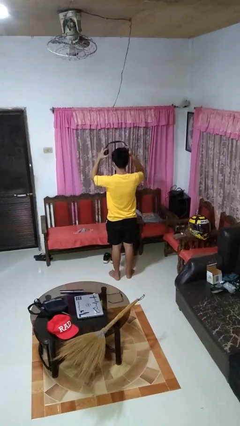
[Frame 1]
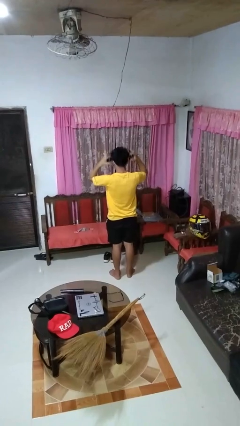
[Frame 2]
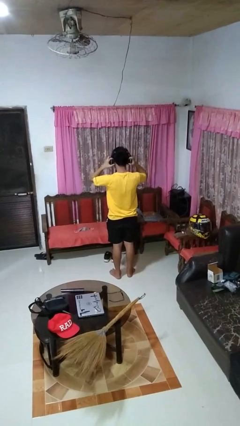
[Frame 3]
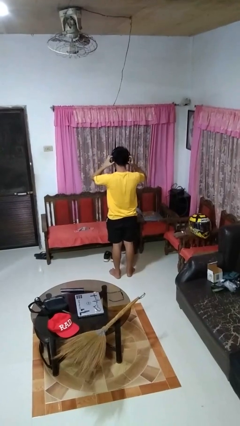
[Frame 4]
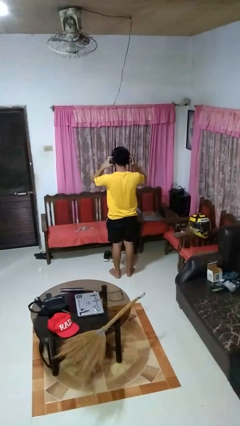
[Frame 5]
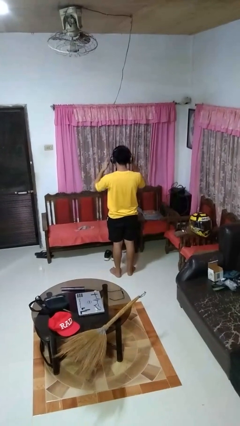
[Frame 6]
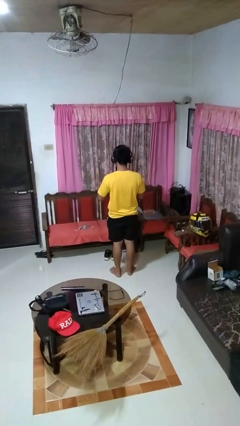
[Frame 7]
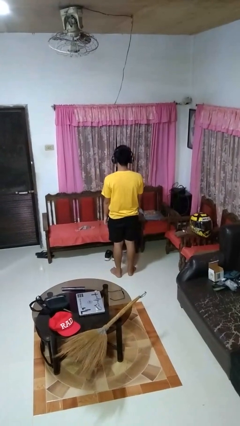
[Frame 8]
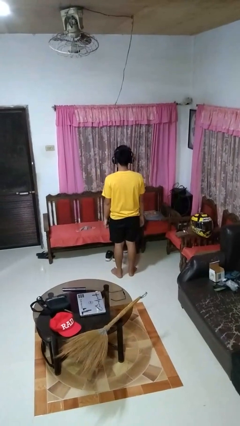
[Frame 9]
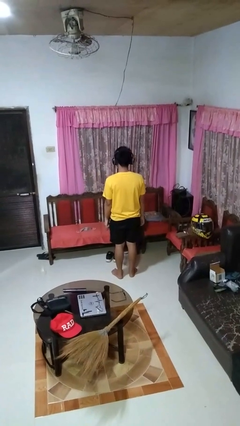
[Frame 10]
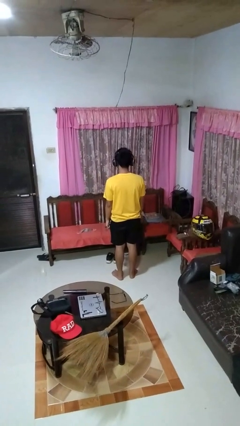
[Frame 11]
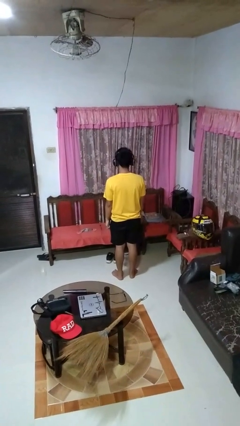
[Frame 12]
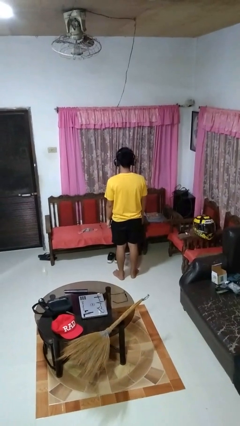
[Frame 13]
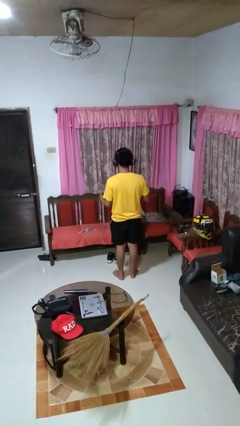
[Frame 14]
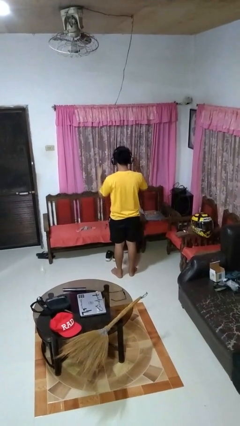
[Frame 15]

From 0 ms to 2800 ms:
person puts on headphones

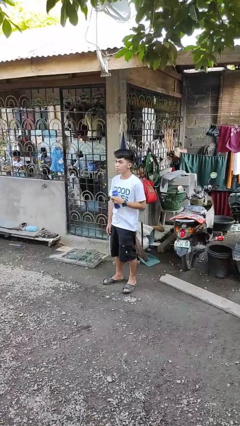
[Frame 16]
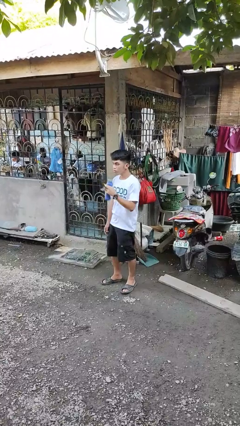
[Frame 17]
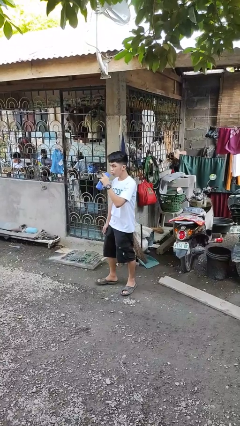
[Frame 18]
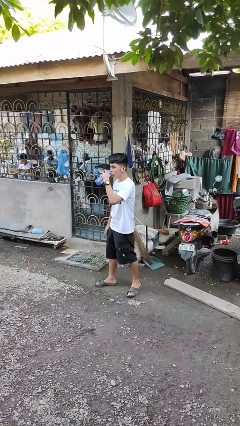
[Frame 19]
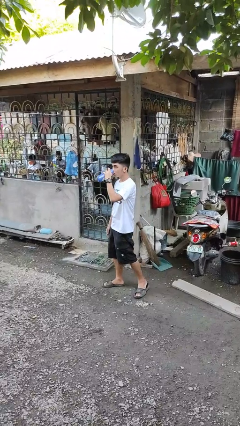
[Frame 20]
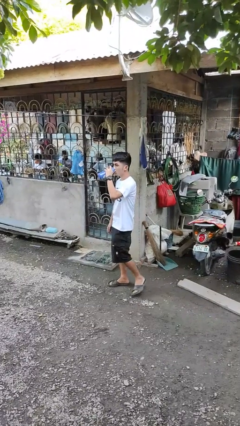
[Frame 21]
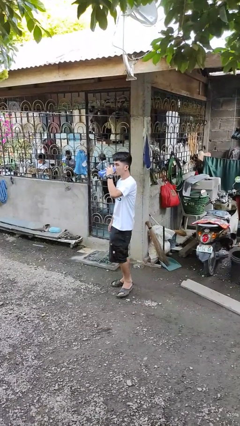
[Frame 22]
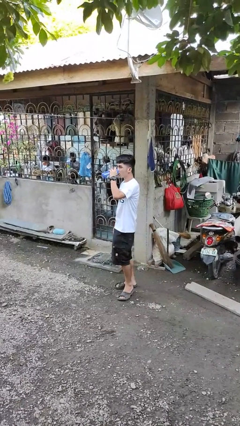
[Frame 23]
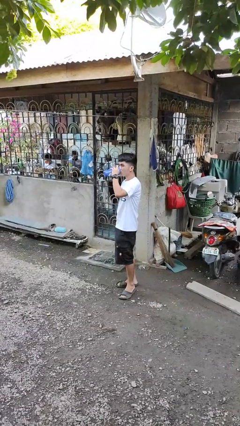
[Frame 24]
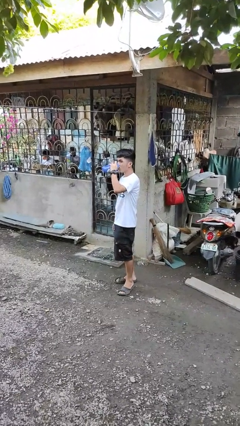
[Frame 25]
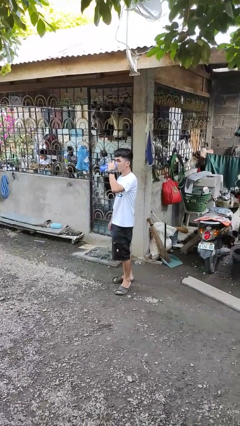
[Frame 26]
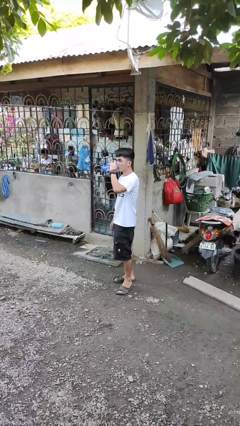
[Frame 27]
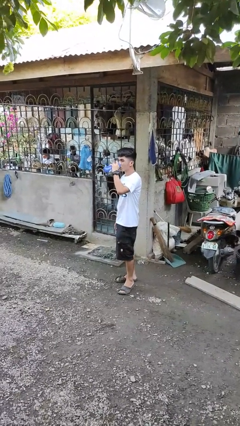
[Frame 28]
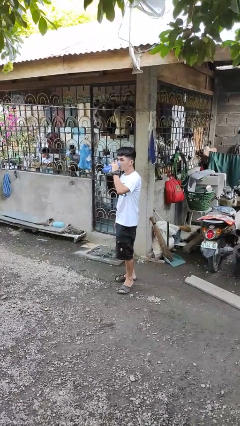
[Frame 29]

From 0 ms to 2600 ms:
person drinks from bottle

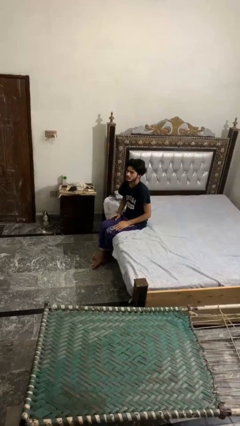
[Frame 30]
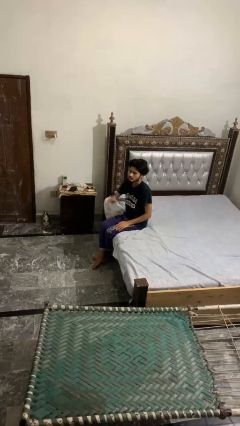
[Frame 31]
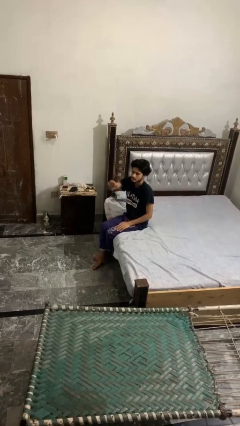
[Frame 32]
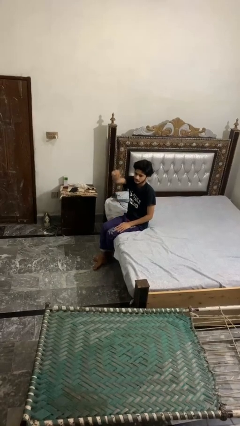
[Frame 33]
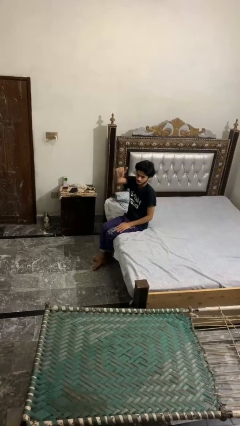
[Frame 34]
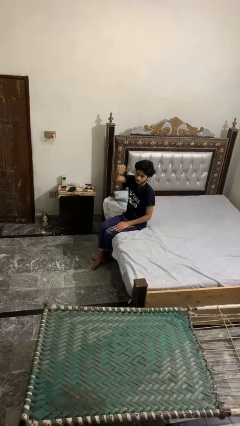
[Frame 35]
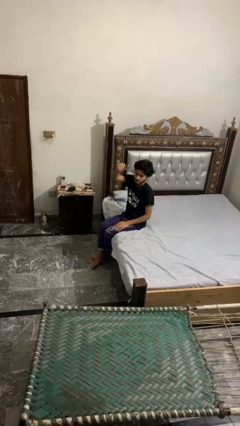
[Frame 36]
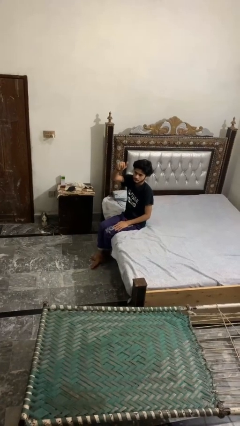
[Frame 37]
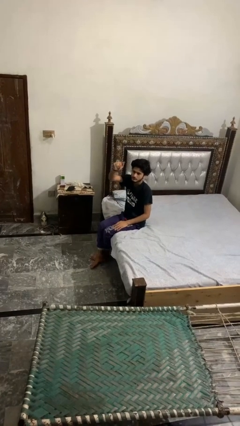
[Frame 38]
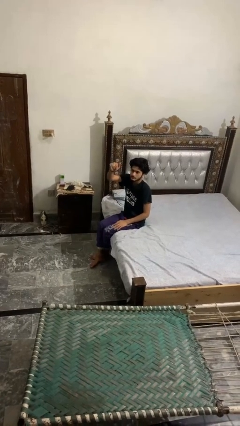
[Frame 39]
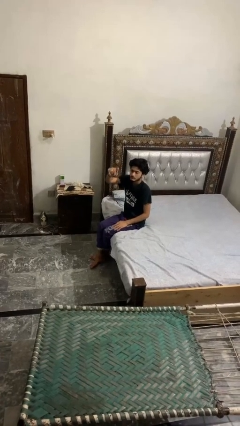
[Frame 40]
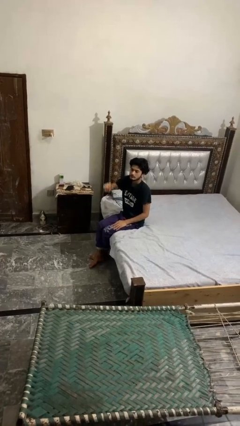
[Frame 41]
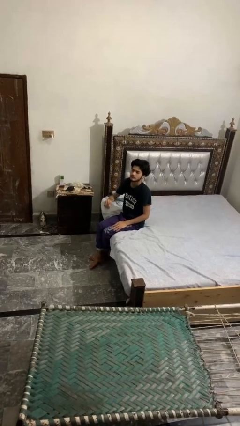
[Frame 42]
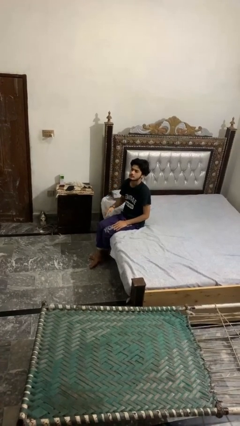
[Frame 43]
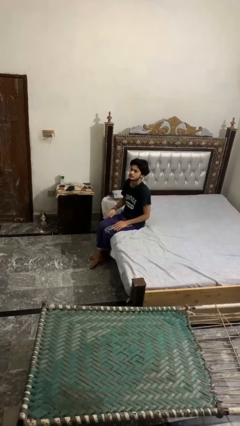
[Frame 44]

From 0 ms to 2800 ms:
person gestures come here

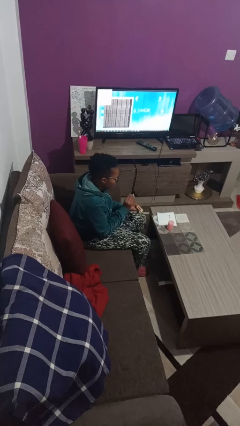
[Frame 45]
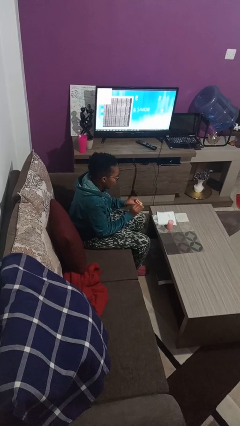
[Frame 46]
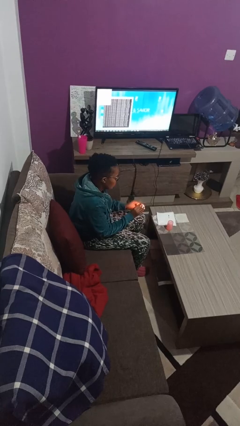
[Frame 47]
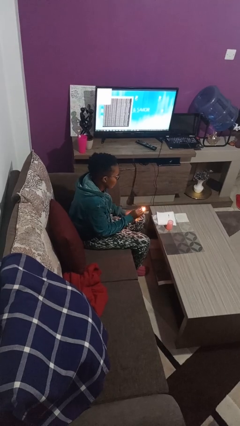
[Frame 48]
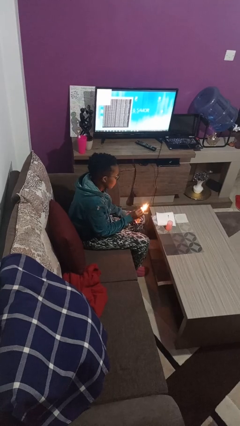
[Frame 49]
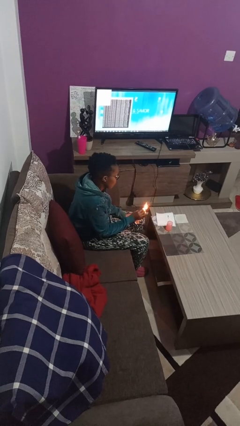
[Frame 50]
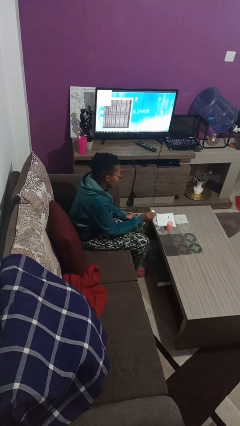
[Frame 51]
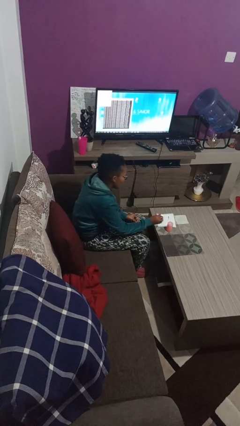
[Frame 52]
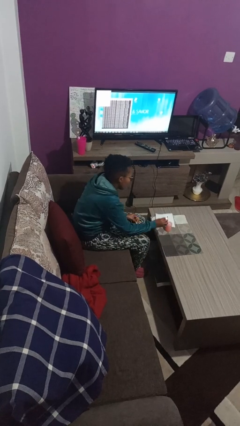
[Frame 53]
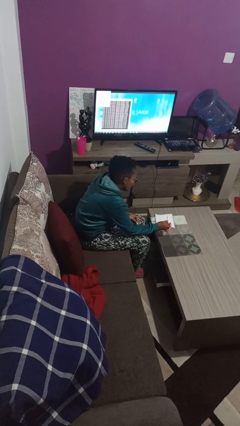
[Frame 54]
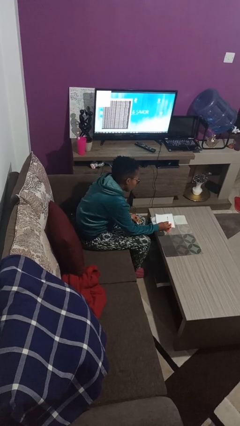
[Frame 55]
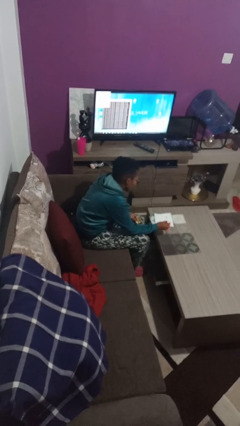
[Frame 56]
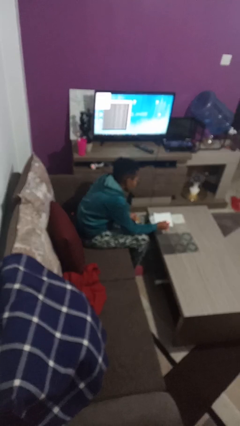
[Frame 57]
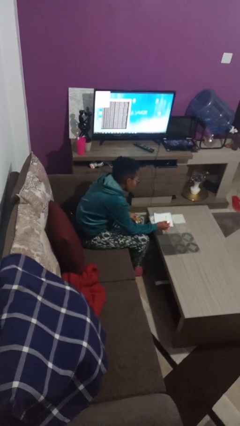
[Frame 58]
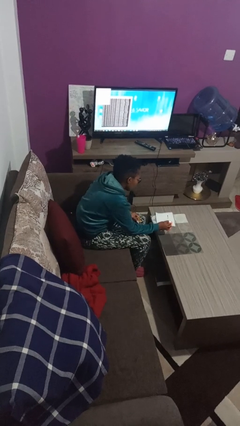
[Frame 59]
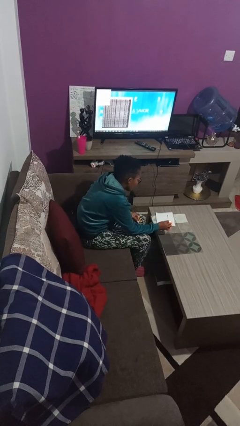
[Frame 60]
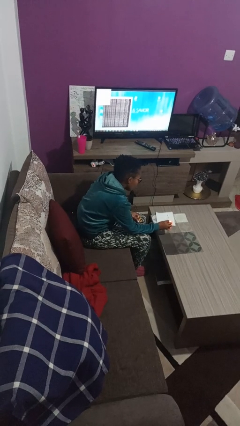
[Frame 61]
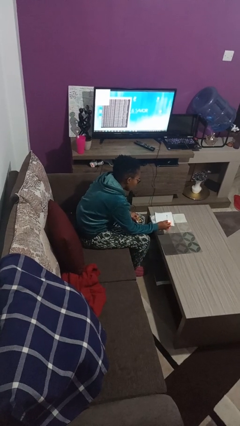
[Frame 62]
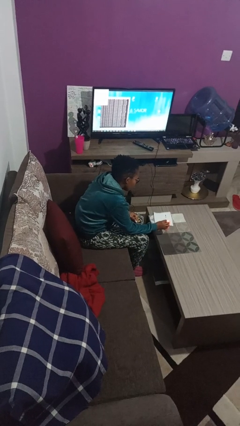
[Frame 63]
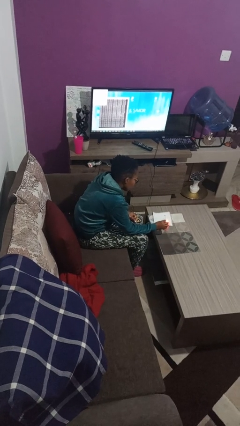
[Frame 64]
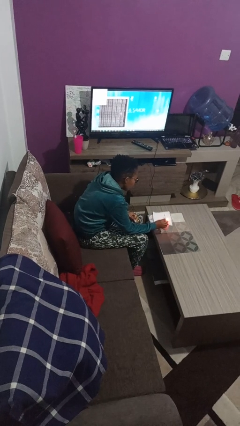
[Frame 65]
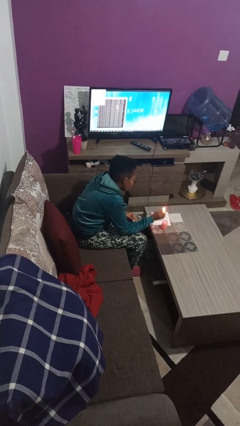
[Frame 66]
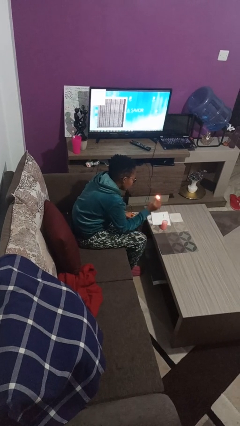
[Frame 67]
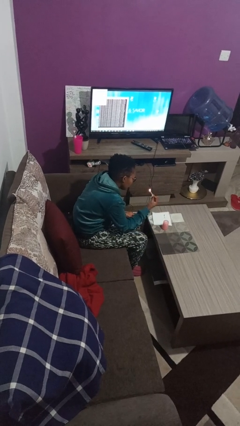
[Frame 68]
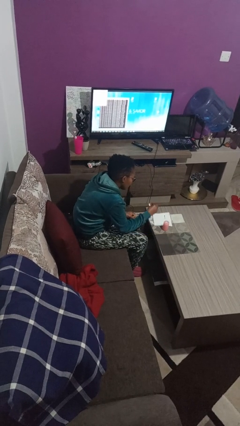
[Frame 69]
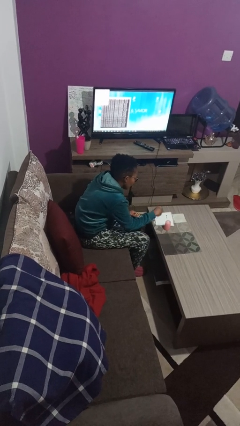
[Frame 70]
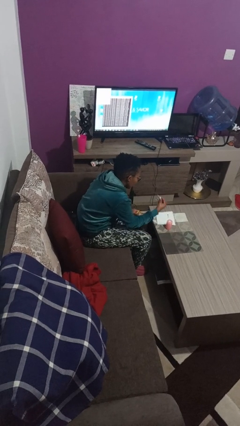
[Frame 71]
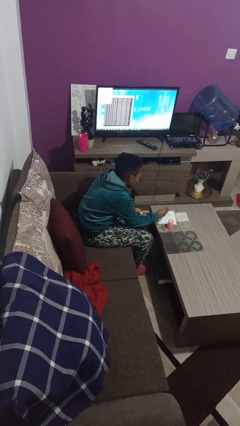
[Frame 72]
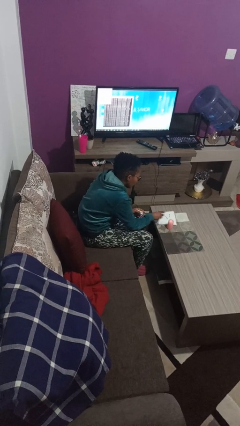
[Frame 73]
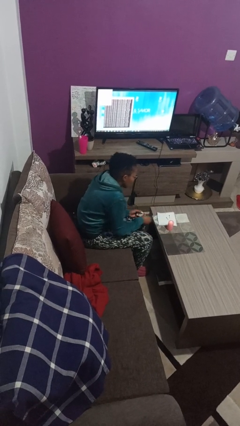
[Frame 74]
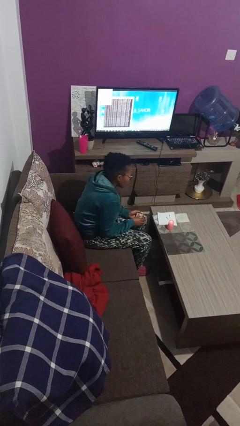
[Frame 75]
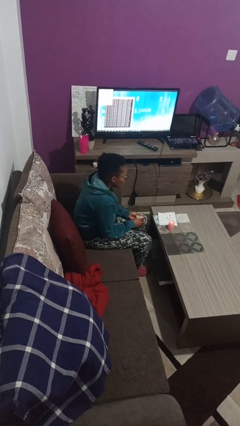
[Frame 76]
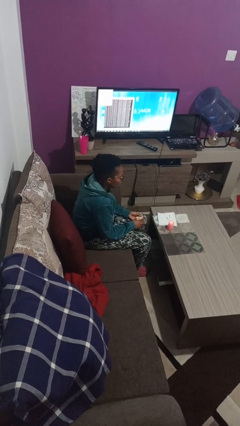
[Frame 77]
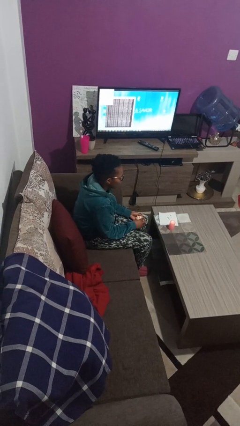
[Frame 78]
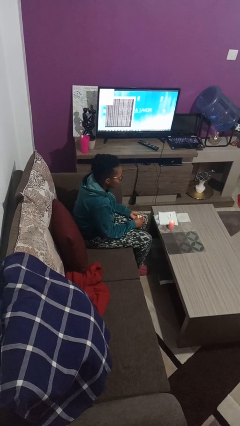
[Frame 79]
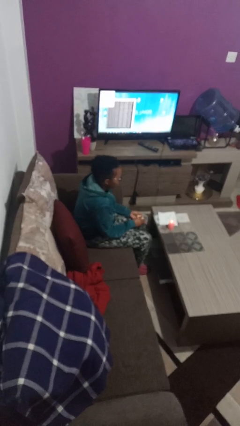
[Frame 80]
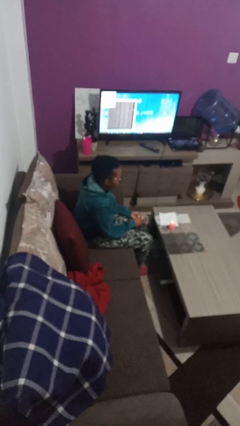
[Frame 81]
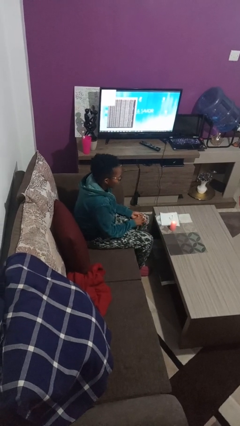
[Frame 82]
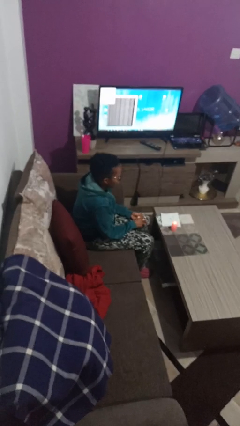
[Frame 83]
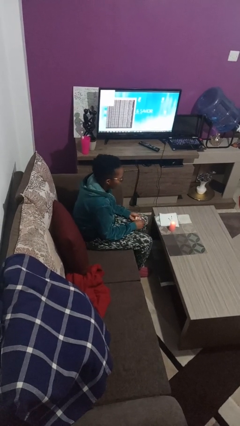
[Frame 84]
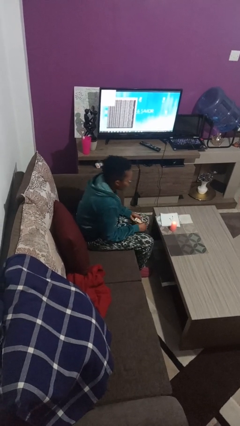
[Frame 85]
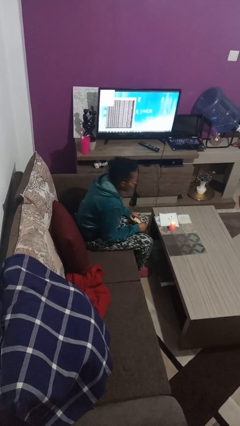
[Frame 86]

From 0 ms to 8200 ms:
person lights candle

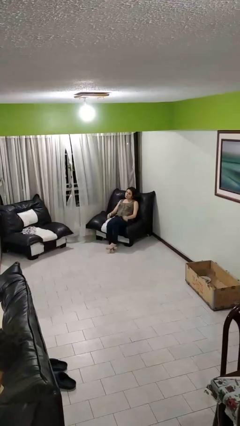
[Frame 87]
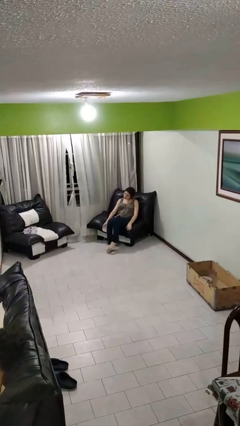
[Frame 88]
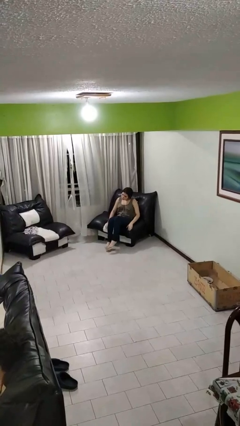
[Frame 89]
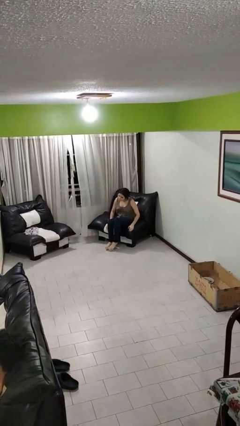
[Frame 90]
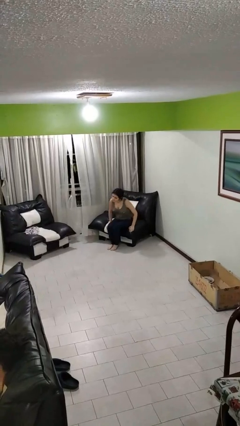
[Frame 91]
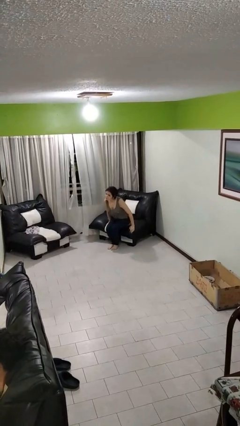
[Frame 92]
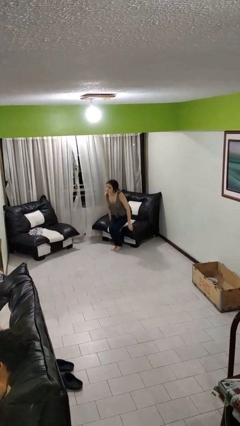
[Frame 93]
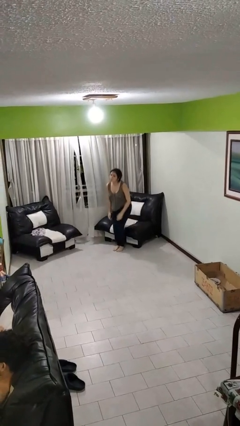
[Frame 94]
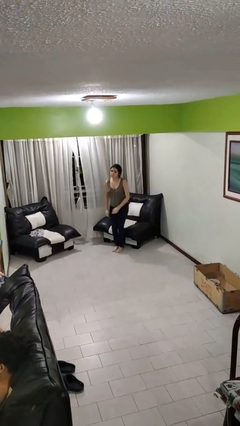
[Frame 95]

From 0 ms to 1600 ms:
person stands up
